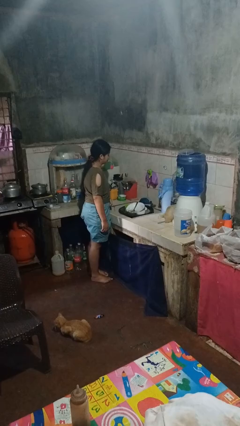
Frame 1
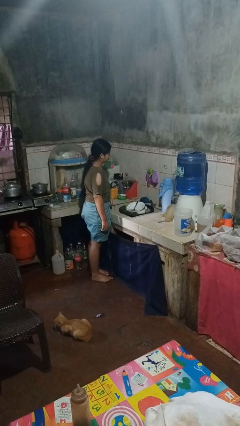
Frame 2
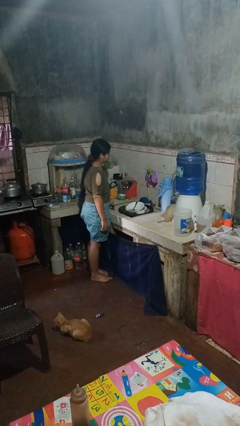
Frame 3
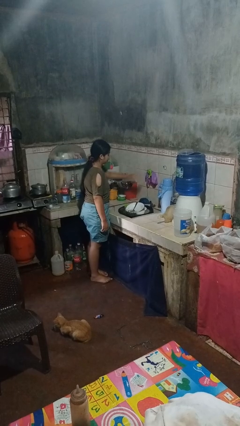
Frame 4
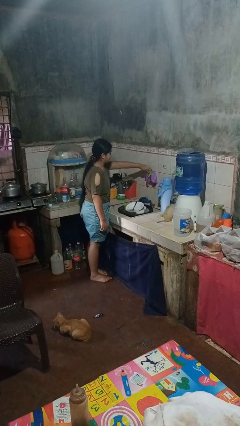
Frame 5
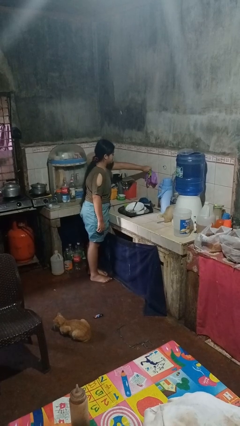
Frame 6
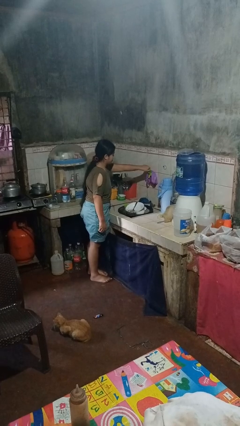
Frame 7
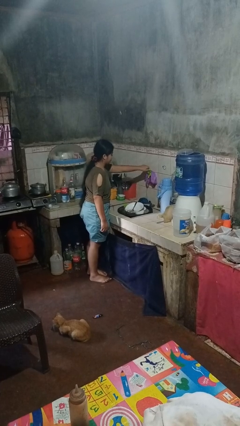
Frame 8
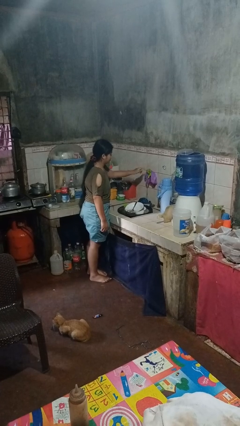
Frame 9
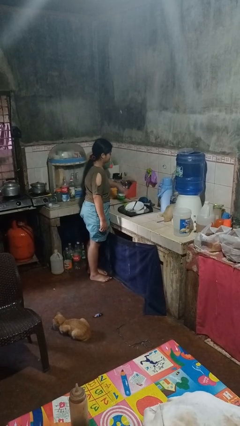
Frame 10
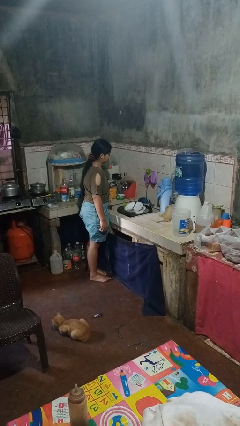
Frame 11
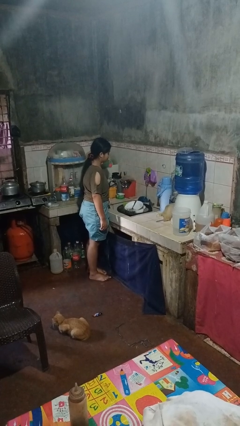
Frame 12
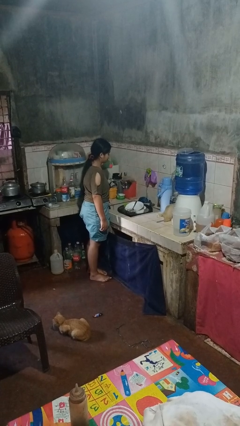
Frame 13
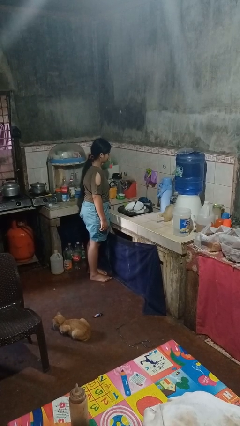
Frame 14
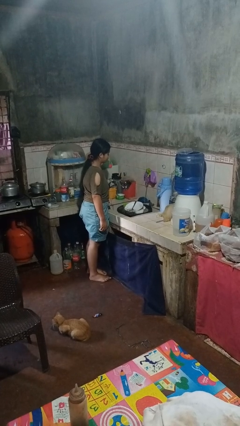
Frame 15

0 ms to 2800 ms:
person turns on faucet

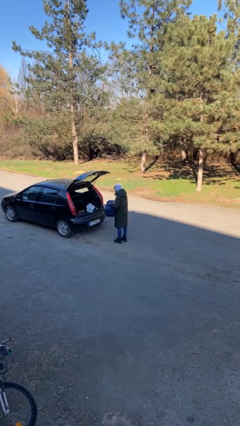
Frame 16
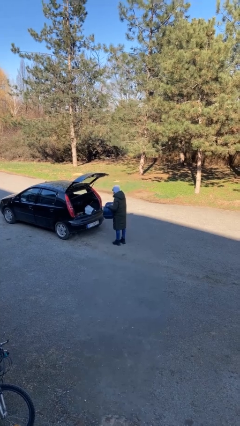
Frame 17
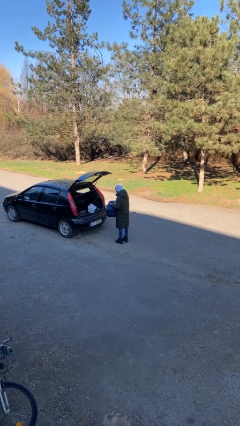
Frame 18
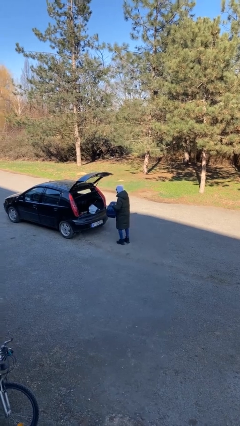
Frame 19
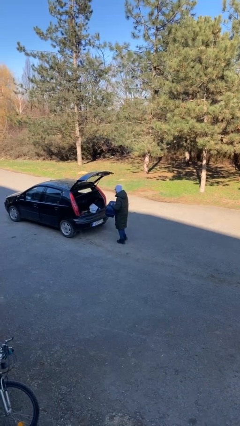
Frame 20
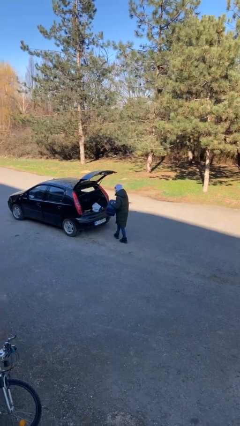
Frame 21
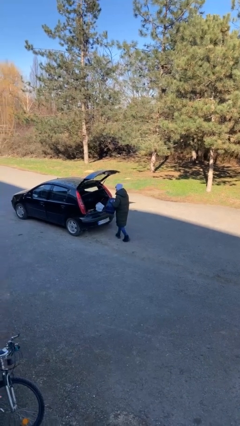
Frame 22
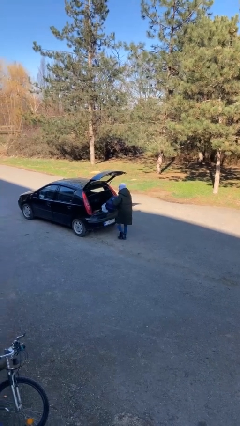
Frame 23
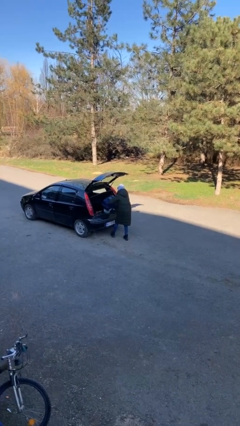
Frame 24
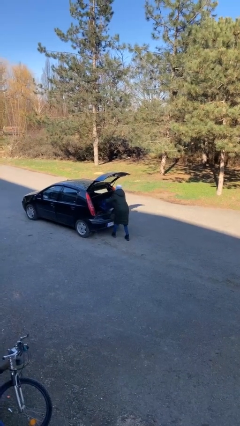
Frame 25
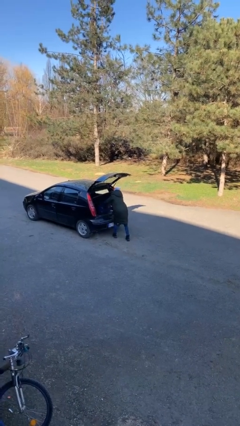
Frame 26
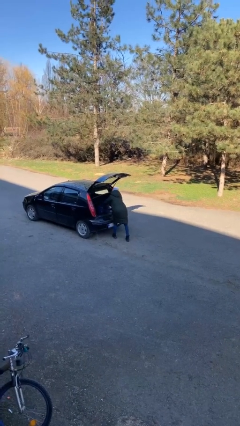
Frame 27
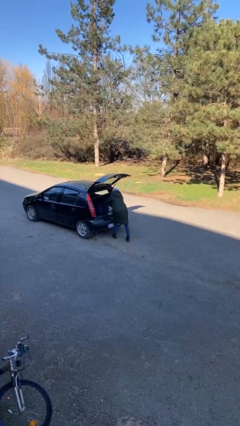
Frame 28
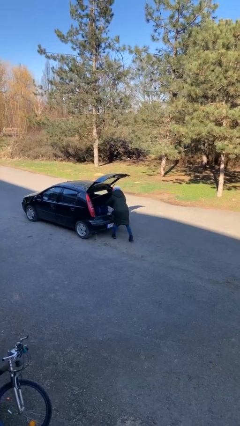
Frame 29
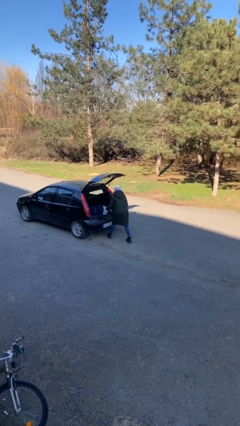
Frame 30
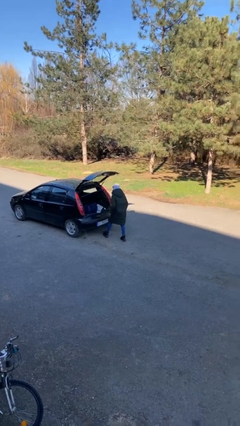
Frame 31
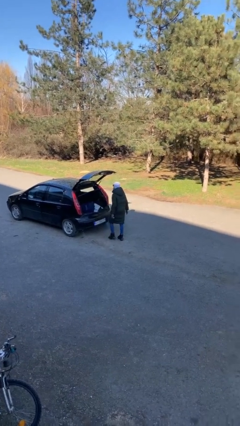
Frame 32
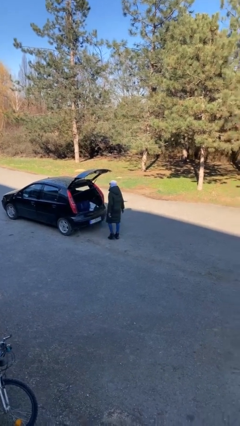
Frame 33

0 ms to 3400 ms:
person loads car

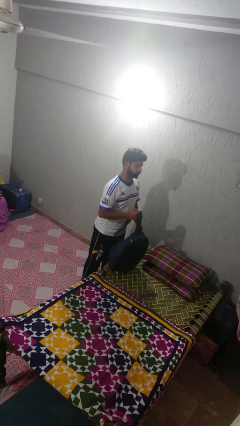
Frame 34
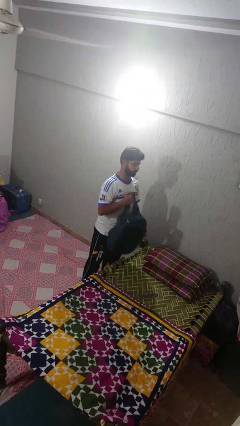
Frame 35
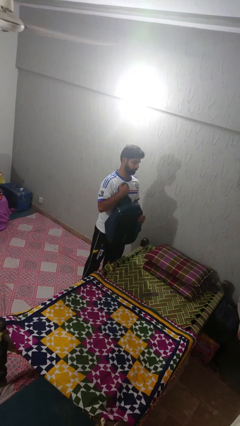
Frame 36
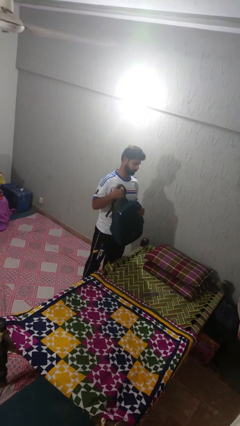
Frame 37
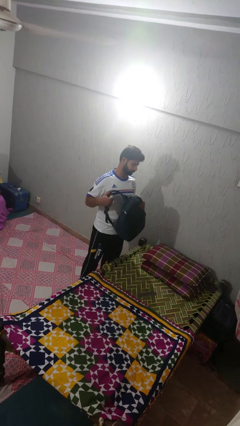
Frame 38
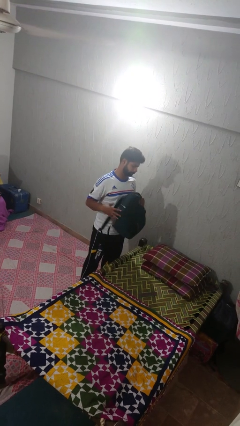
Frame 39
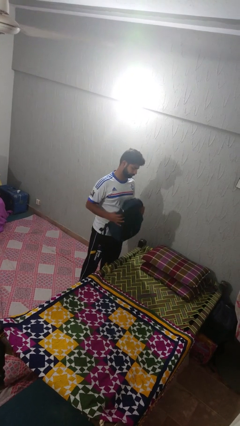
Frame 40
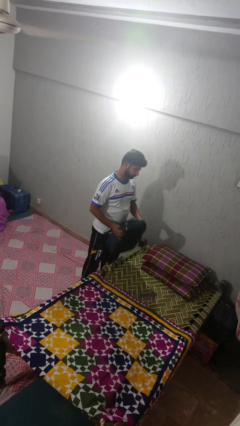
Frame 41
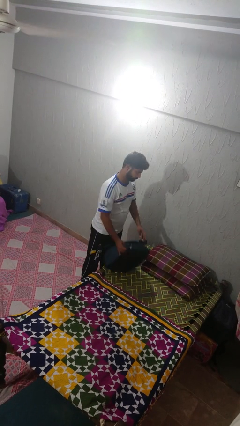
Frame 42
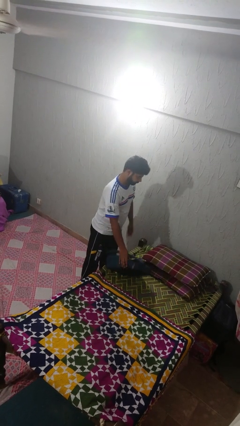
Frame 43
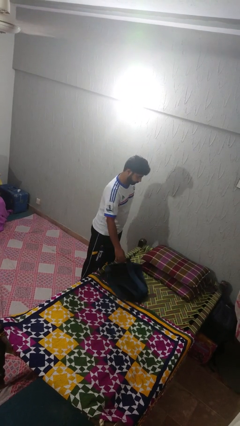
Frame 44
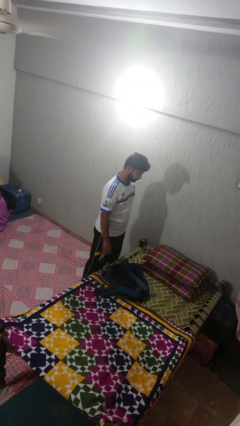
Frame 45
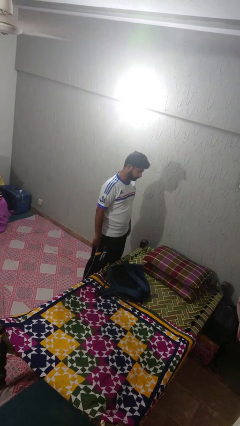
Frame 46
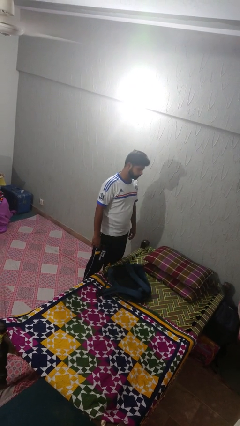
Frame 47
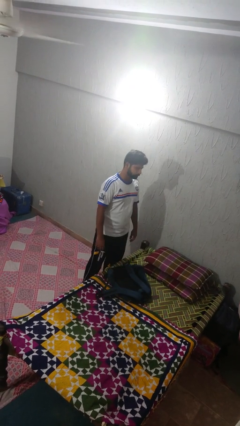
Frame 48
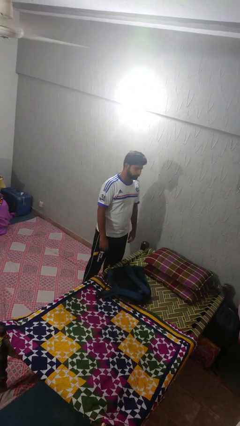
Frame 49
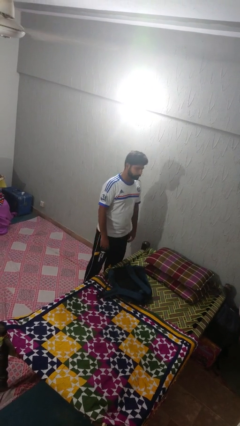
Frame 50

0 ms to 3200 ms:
person puts down object on bed

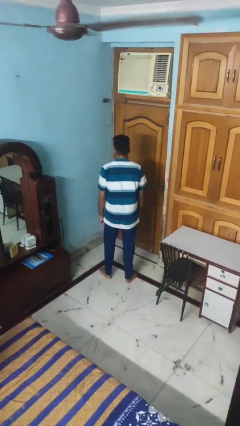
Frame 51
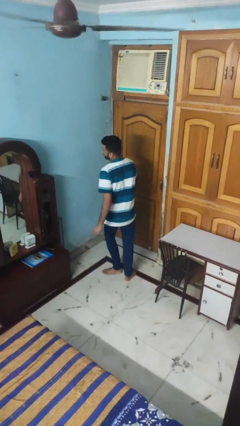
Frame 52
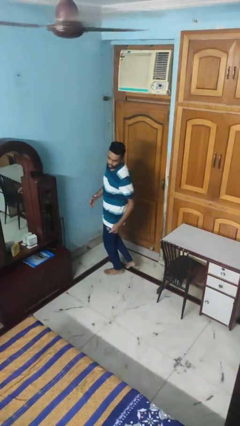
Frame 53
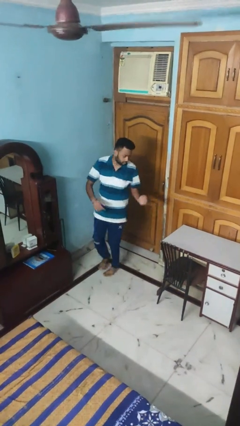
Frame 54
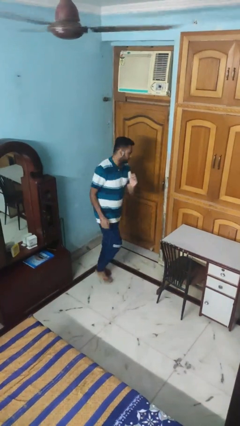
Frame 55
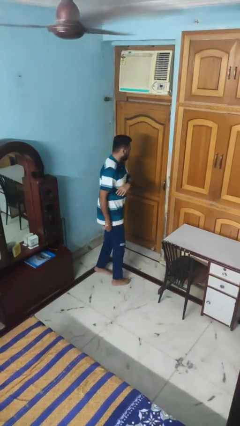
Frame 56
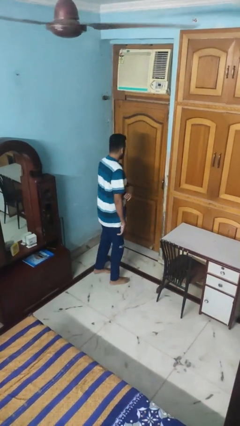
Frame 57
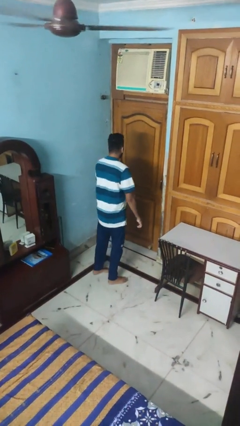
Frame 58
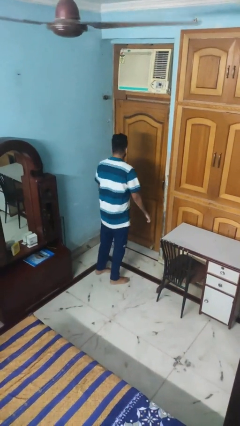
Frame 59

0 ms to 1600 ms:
person twirls

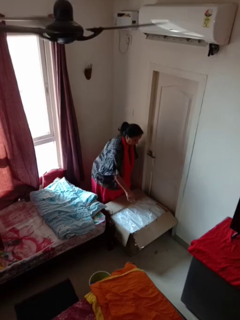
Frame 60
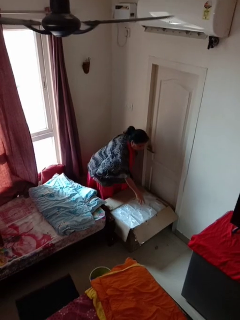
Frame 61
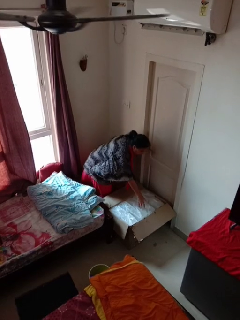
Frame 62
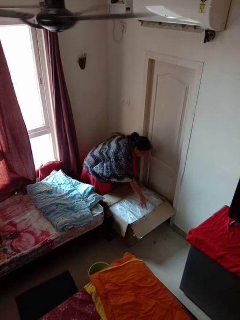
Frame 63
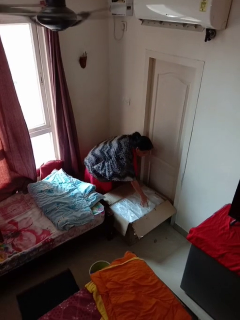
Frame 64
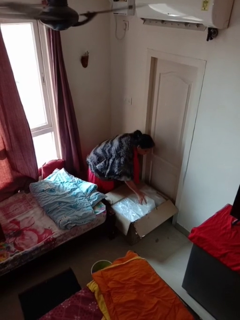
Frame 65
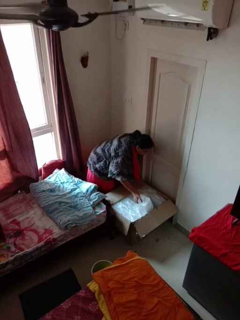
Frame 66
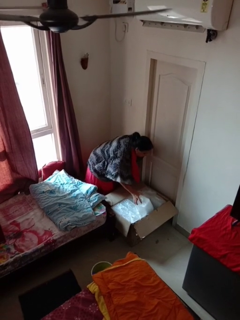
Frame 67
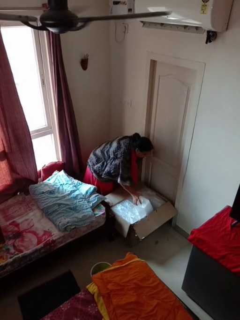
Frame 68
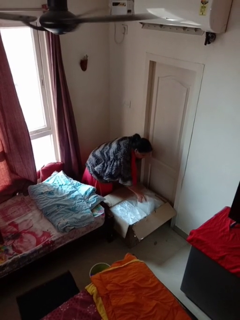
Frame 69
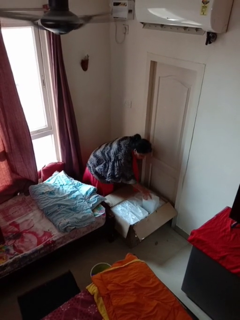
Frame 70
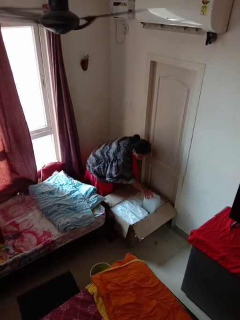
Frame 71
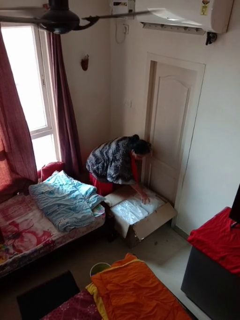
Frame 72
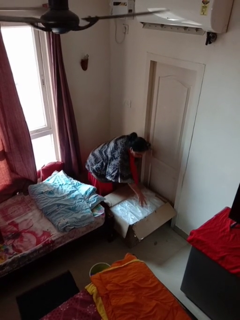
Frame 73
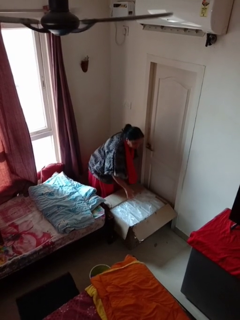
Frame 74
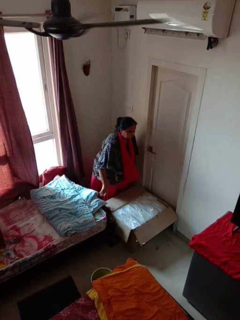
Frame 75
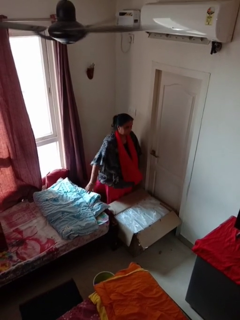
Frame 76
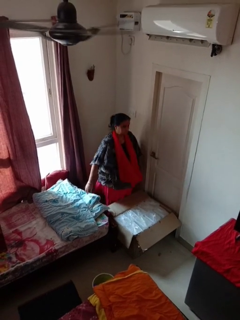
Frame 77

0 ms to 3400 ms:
person searches in box

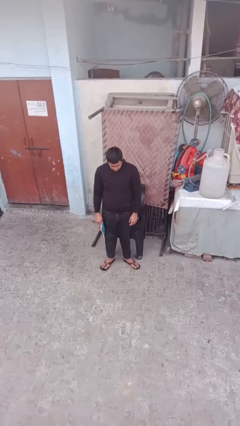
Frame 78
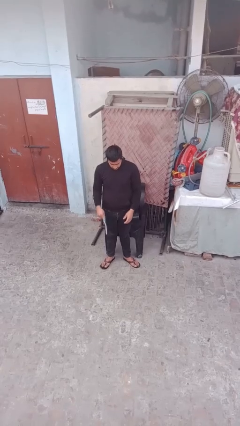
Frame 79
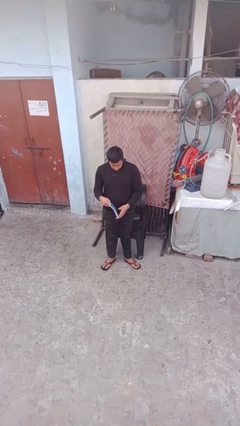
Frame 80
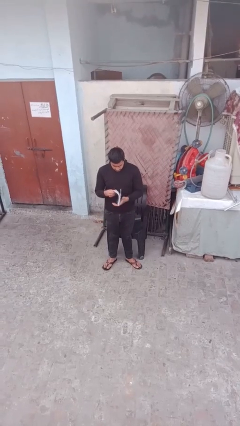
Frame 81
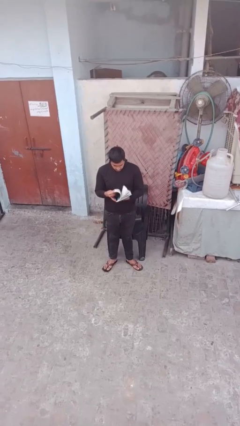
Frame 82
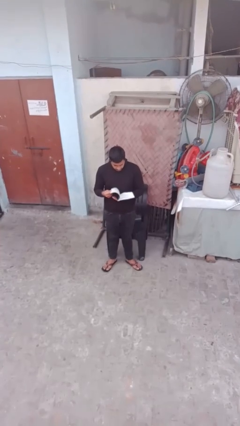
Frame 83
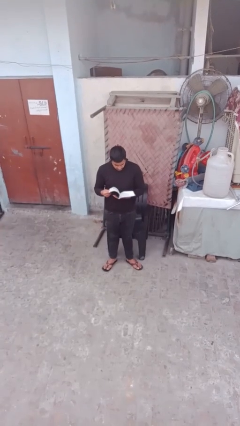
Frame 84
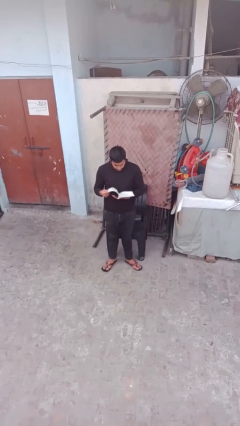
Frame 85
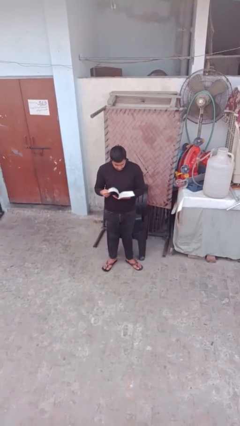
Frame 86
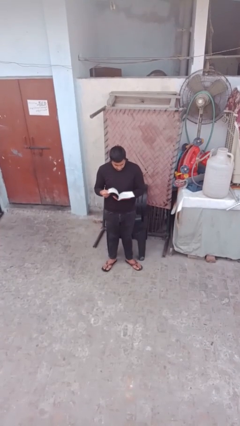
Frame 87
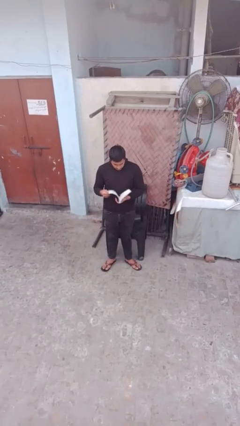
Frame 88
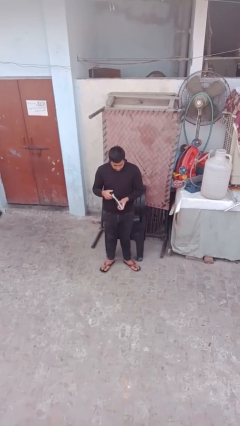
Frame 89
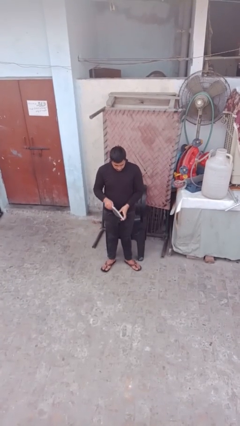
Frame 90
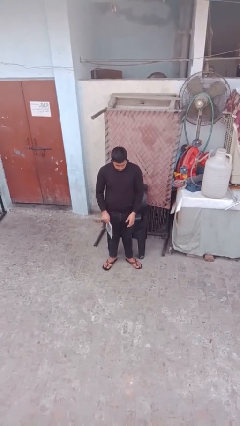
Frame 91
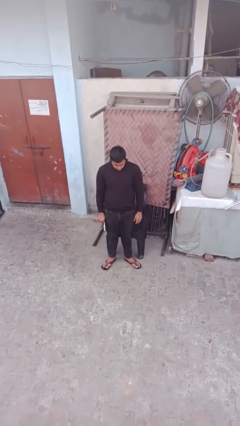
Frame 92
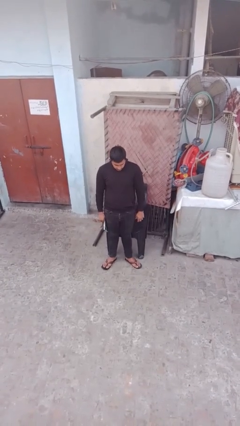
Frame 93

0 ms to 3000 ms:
person reads document

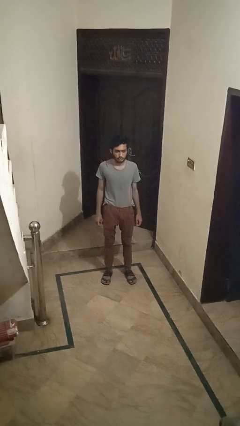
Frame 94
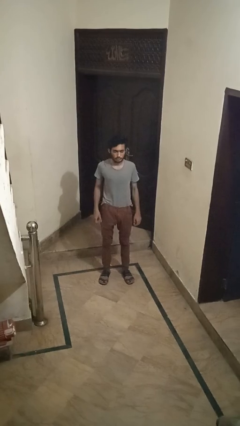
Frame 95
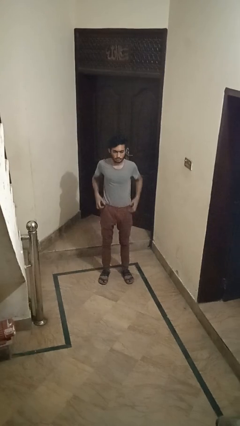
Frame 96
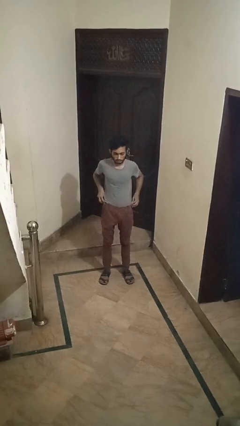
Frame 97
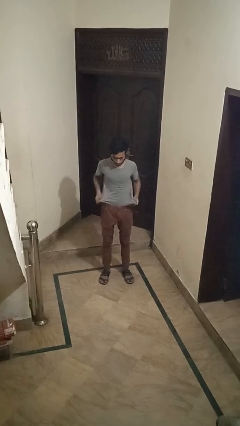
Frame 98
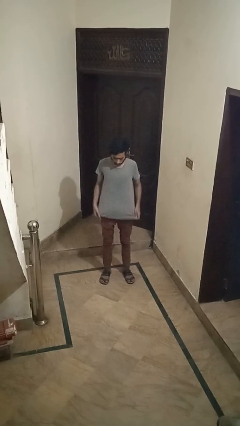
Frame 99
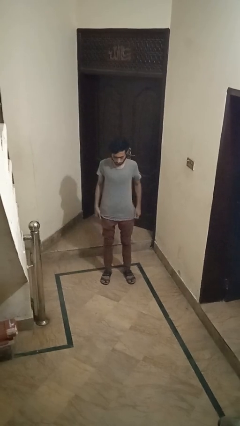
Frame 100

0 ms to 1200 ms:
person untucks shirt
